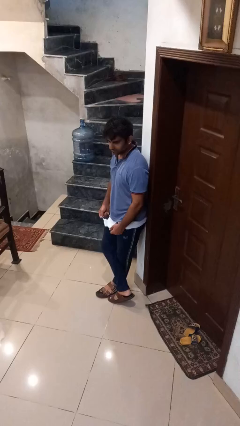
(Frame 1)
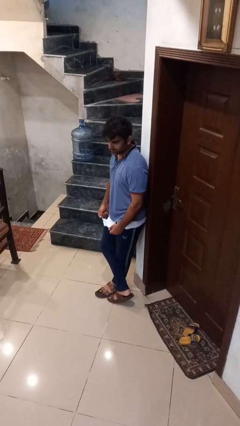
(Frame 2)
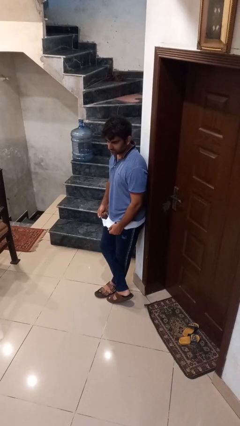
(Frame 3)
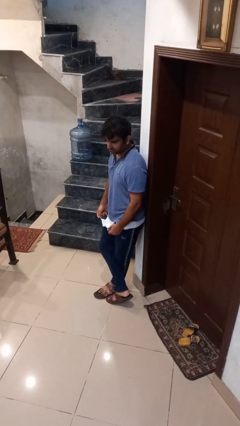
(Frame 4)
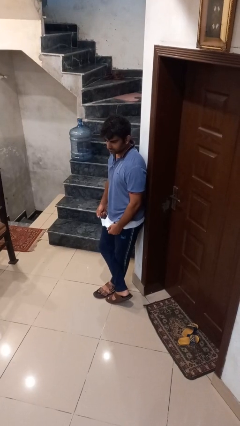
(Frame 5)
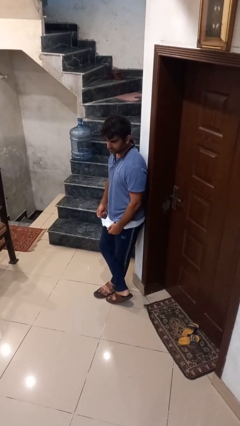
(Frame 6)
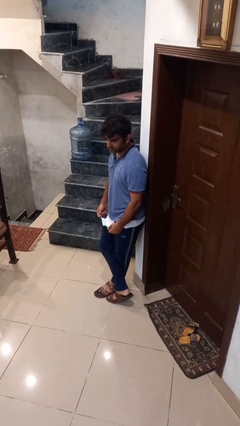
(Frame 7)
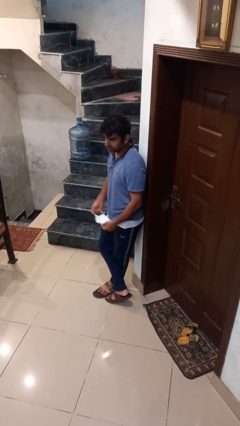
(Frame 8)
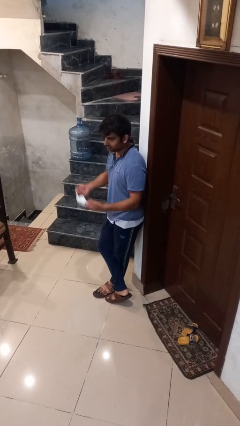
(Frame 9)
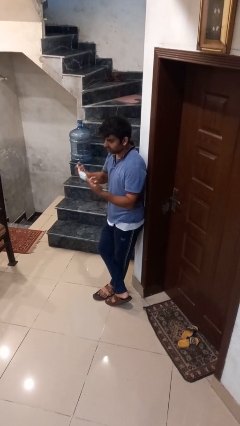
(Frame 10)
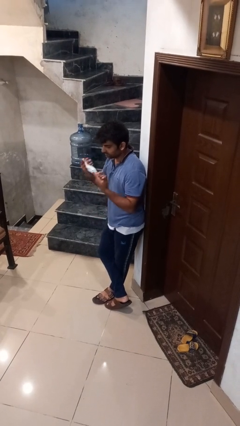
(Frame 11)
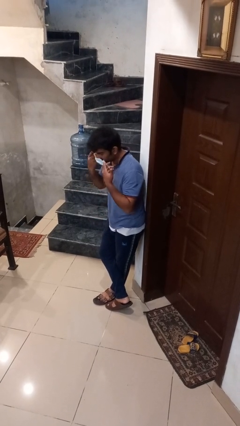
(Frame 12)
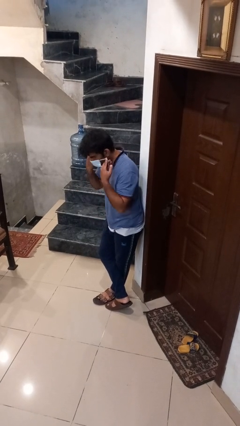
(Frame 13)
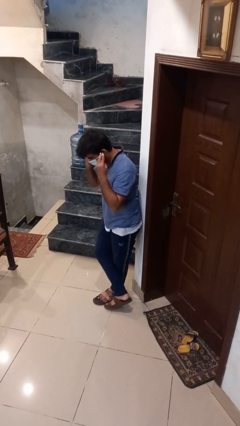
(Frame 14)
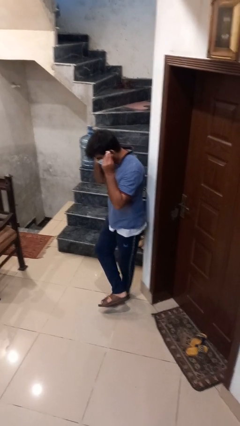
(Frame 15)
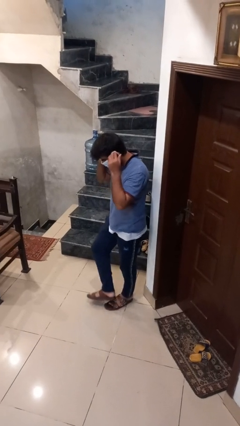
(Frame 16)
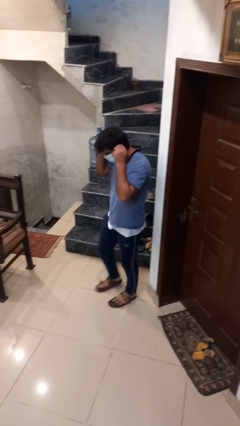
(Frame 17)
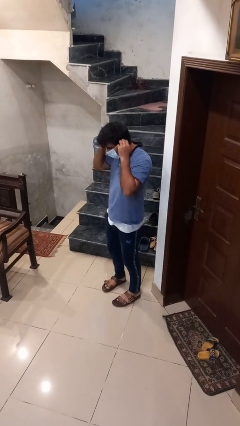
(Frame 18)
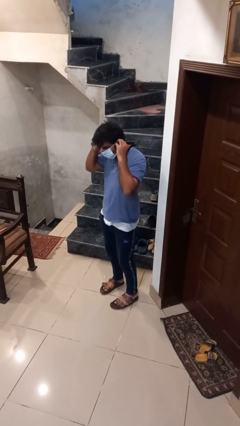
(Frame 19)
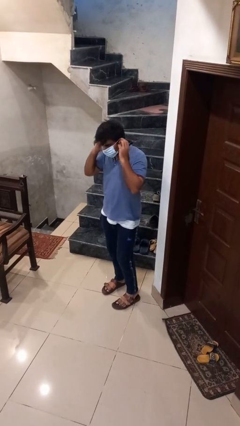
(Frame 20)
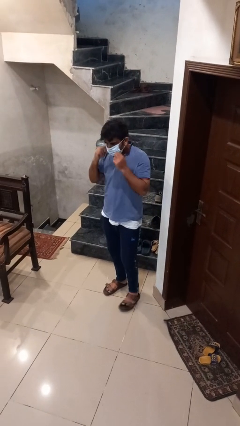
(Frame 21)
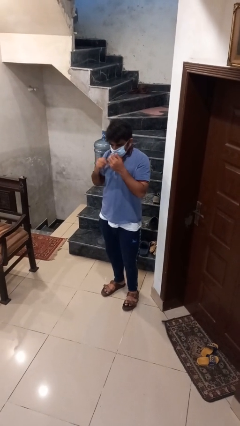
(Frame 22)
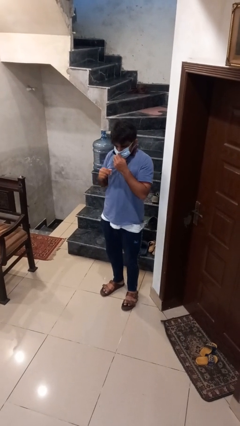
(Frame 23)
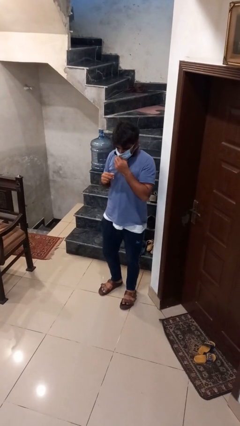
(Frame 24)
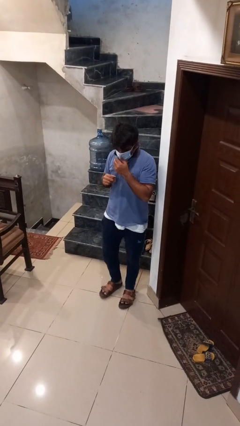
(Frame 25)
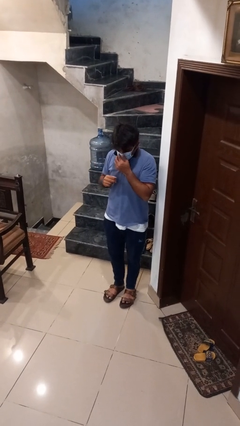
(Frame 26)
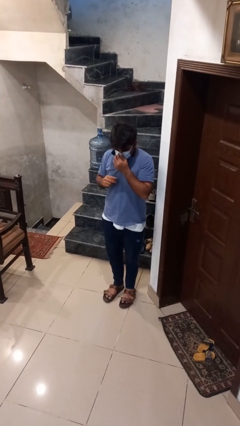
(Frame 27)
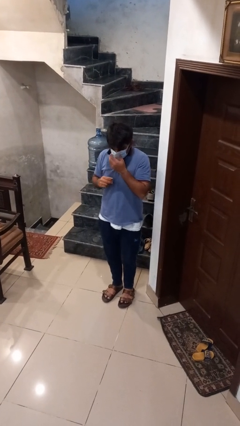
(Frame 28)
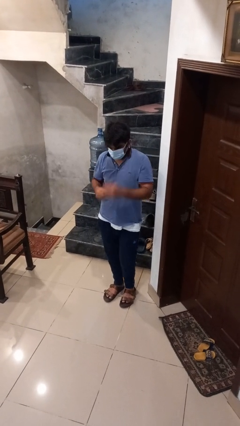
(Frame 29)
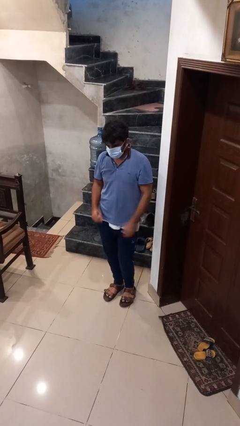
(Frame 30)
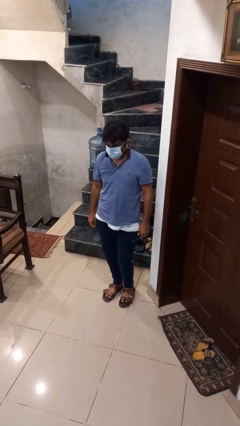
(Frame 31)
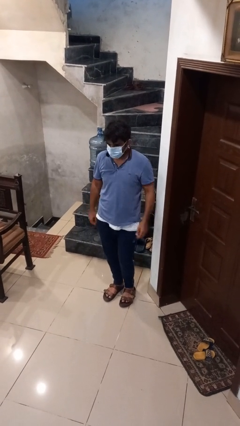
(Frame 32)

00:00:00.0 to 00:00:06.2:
person puts on facemask

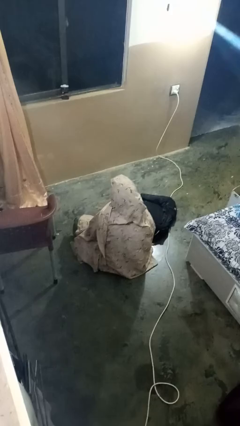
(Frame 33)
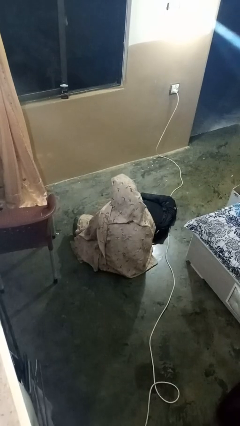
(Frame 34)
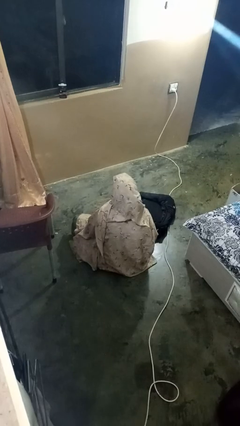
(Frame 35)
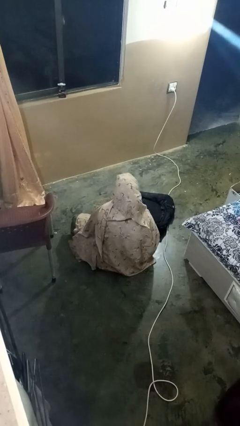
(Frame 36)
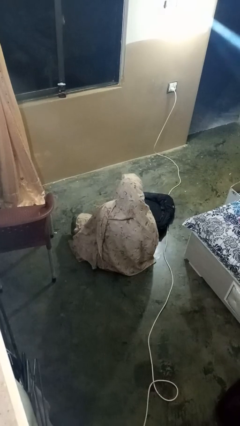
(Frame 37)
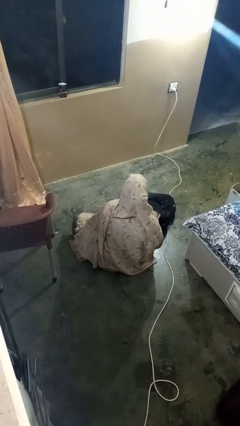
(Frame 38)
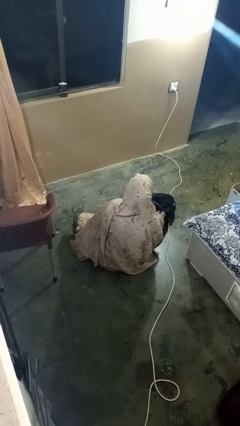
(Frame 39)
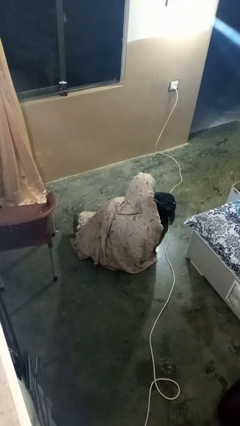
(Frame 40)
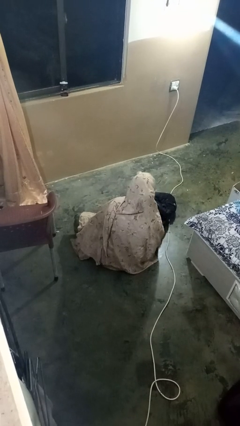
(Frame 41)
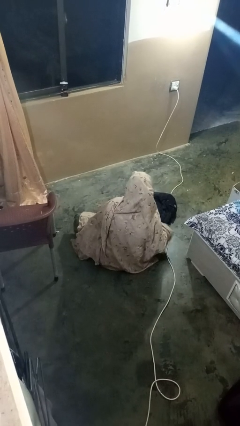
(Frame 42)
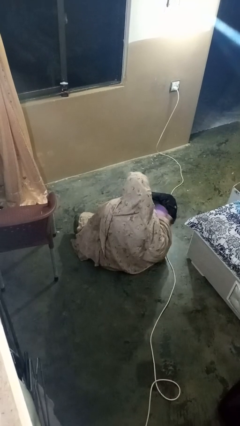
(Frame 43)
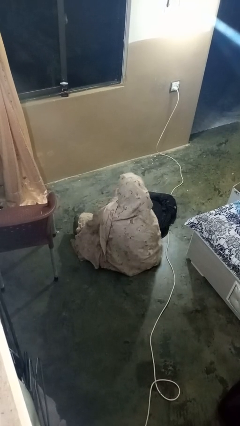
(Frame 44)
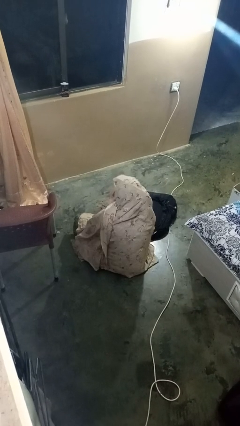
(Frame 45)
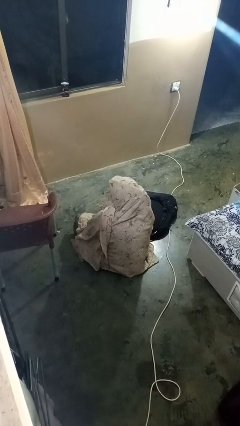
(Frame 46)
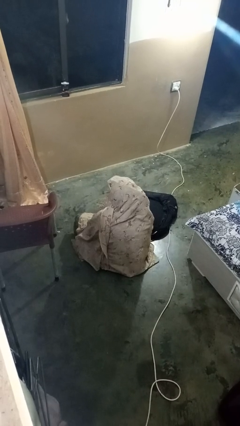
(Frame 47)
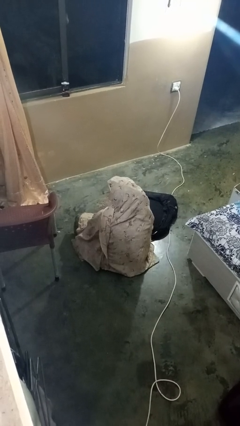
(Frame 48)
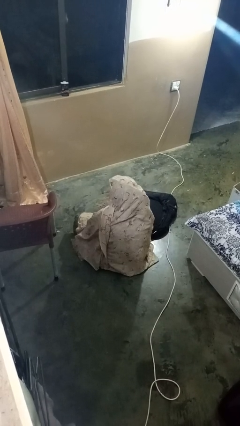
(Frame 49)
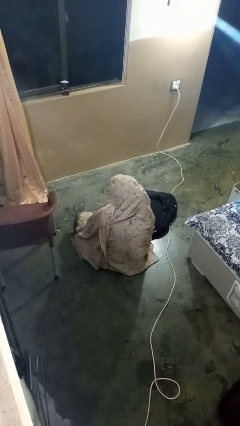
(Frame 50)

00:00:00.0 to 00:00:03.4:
person eats snack from bag

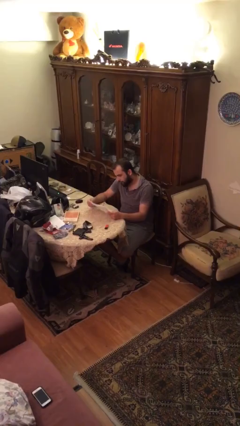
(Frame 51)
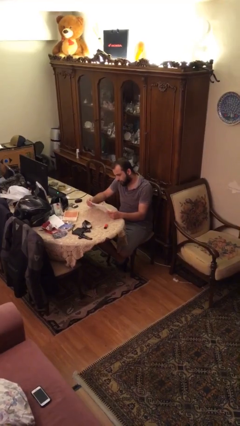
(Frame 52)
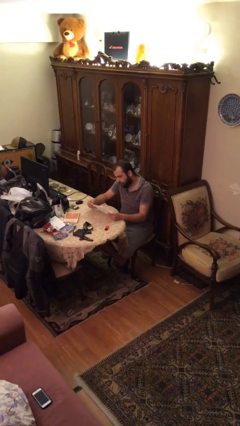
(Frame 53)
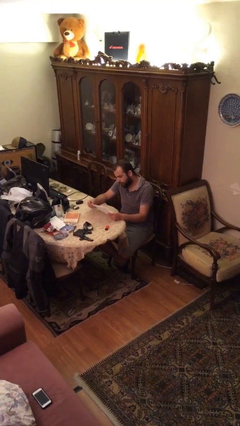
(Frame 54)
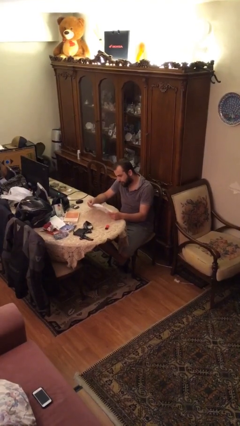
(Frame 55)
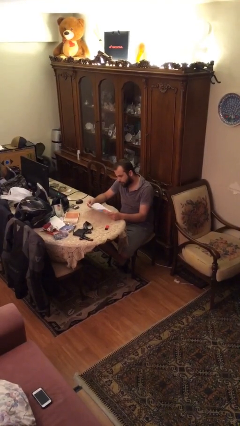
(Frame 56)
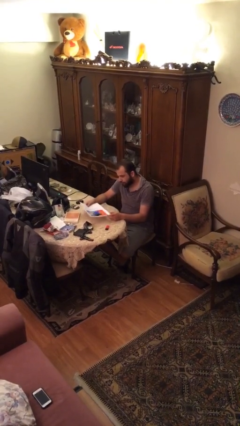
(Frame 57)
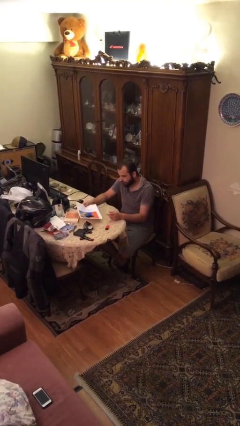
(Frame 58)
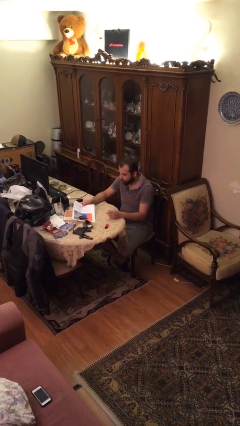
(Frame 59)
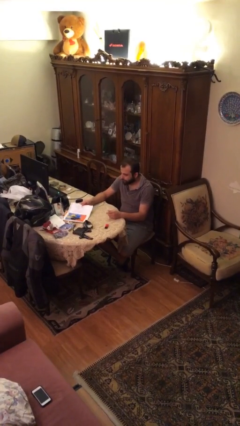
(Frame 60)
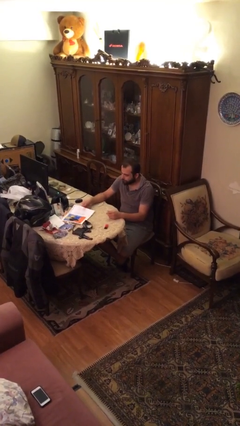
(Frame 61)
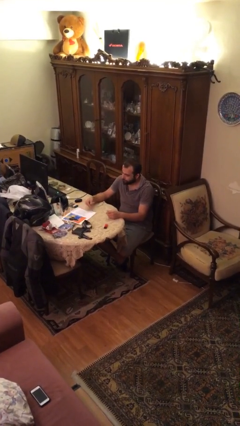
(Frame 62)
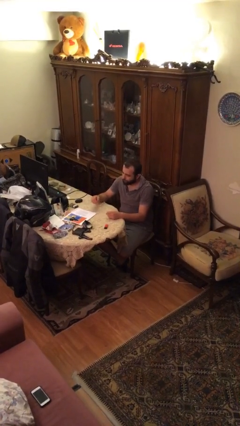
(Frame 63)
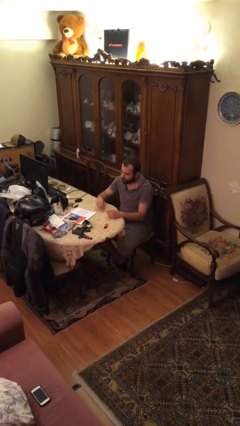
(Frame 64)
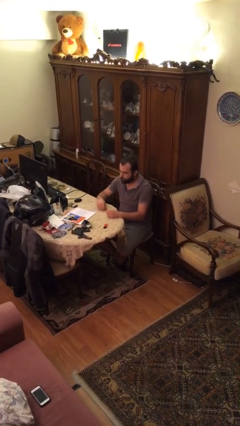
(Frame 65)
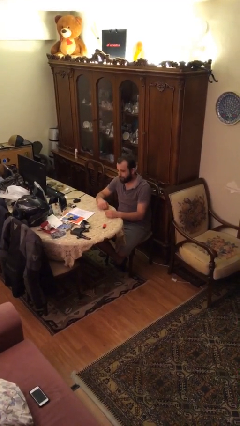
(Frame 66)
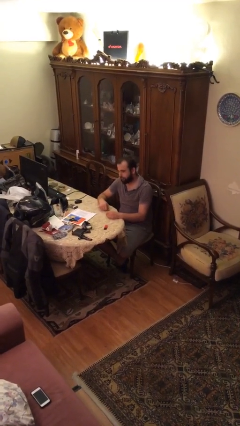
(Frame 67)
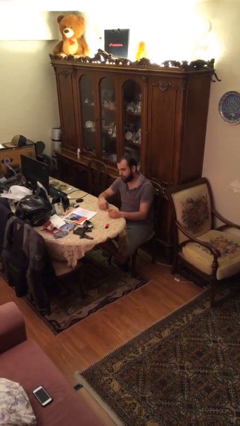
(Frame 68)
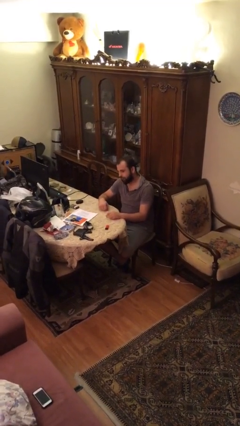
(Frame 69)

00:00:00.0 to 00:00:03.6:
person puts down object on table

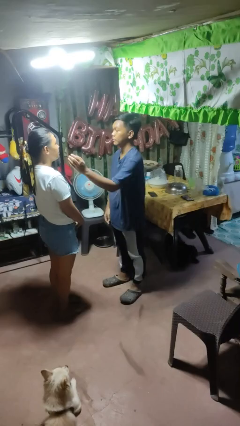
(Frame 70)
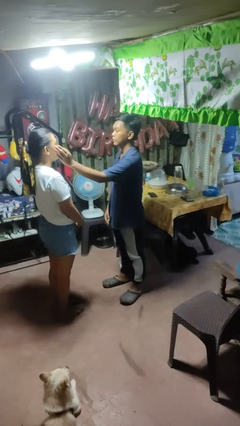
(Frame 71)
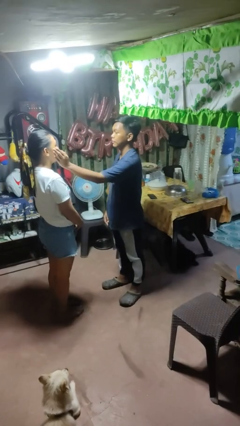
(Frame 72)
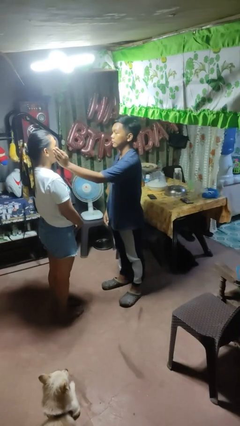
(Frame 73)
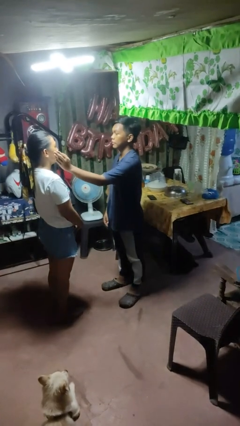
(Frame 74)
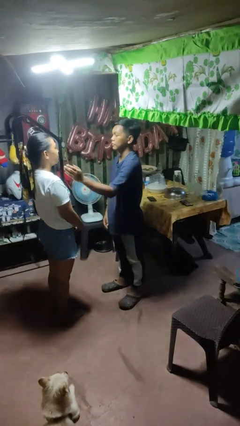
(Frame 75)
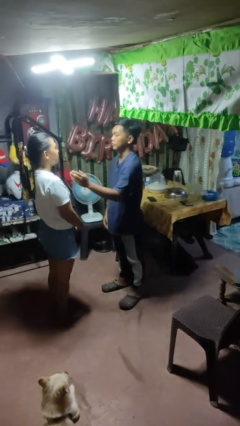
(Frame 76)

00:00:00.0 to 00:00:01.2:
person touches face of person

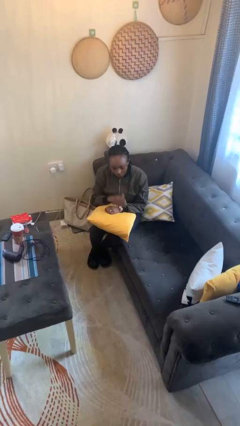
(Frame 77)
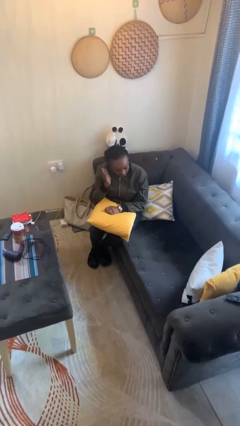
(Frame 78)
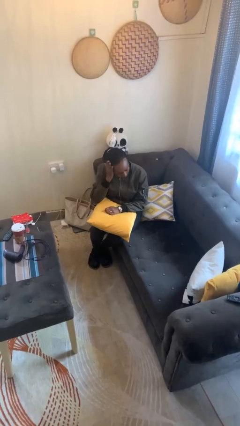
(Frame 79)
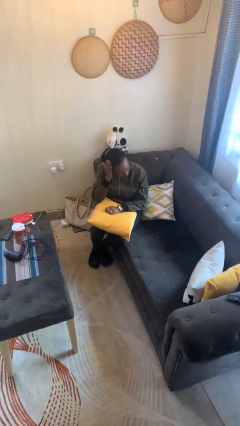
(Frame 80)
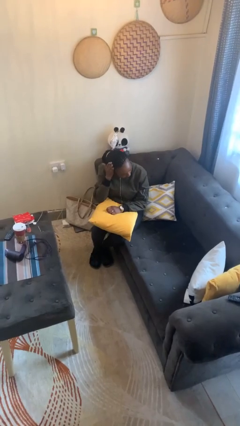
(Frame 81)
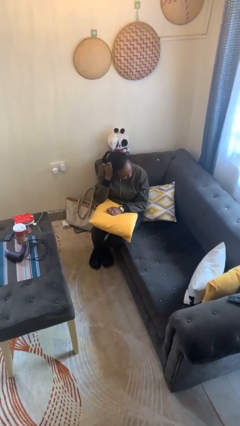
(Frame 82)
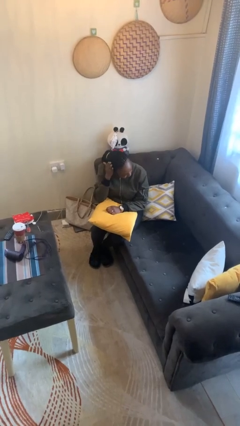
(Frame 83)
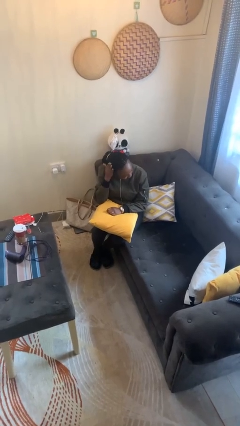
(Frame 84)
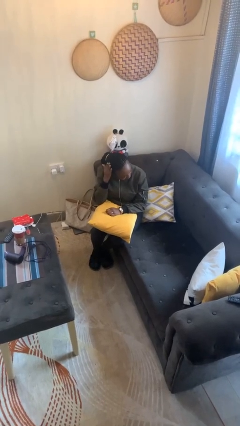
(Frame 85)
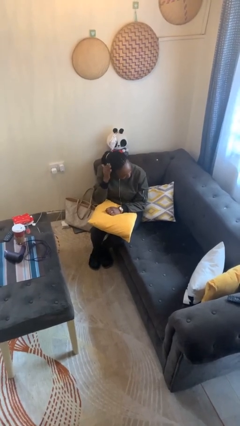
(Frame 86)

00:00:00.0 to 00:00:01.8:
person pats head

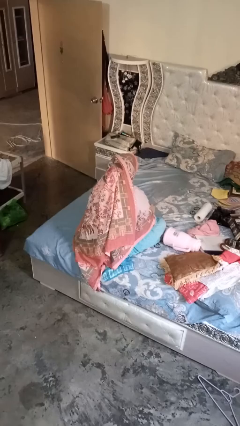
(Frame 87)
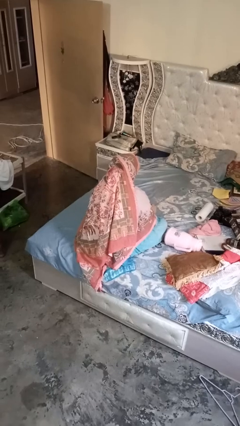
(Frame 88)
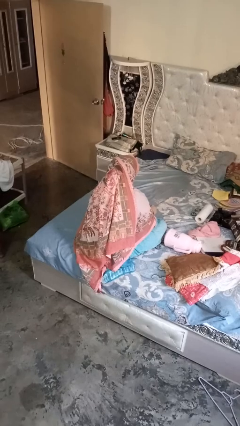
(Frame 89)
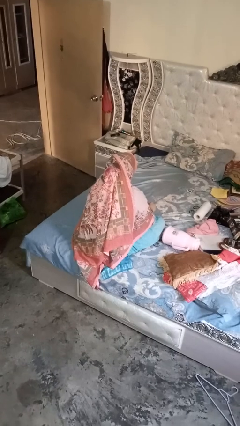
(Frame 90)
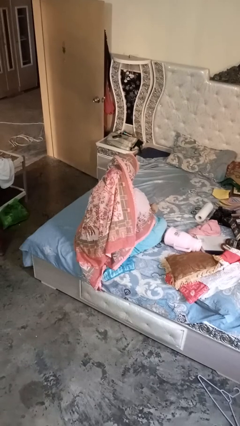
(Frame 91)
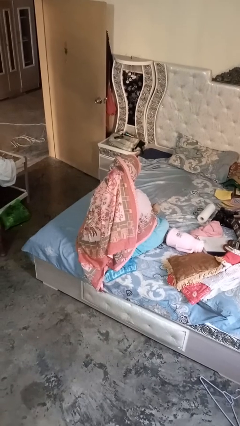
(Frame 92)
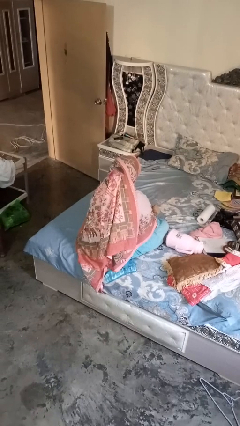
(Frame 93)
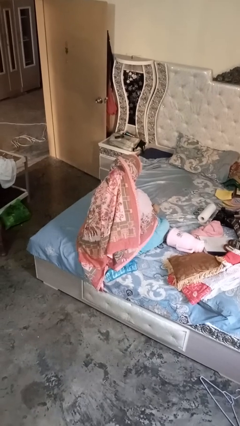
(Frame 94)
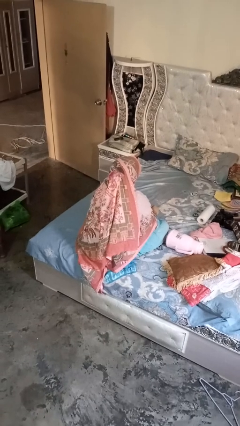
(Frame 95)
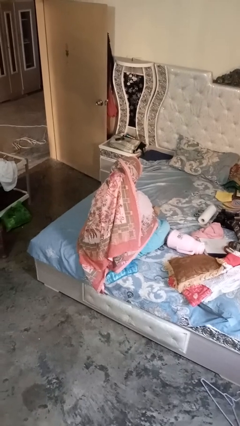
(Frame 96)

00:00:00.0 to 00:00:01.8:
person stirs mug
